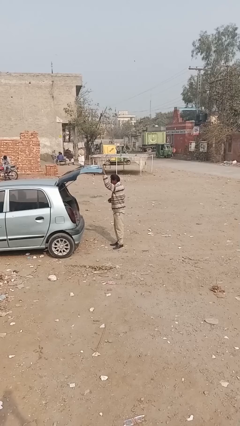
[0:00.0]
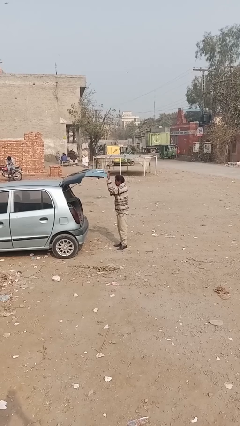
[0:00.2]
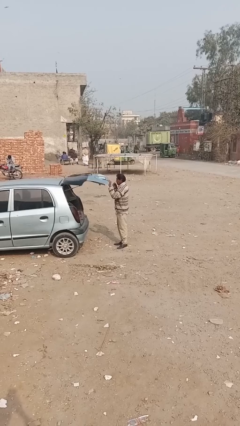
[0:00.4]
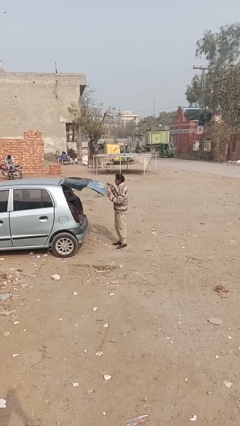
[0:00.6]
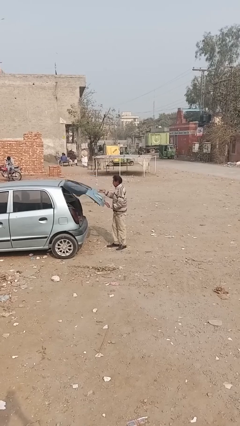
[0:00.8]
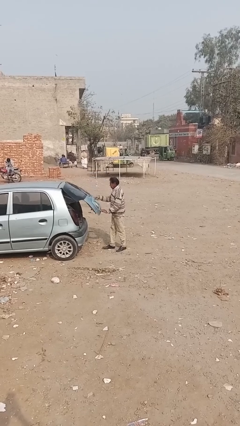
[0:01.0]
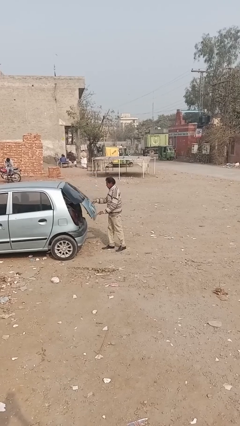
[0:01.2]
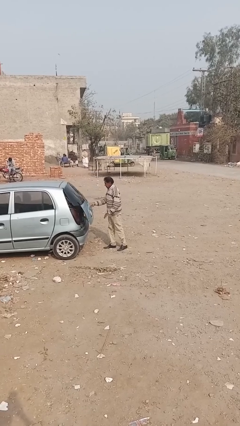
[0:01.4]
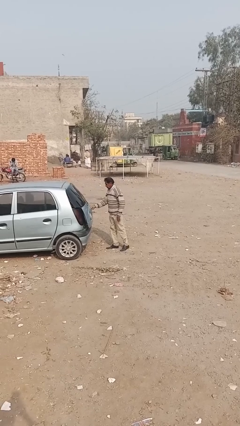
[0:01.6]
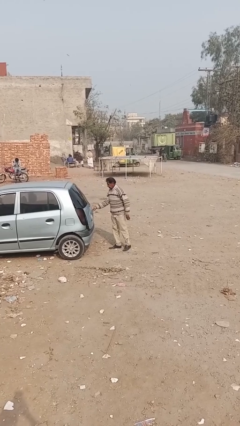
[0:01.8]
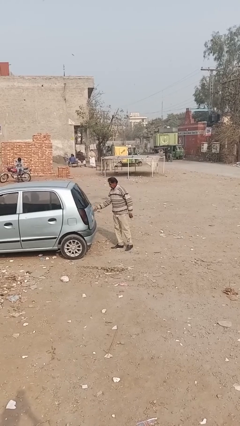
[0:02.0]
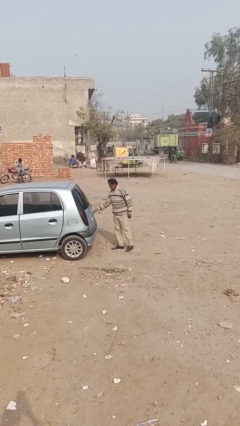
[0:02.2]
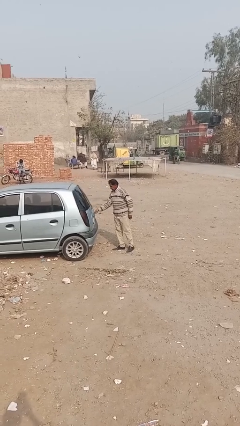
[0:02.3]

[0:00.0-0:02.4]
person closes car trunk

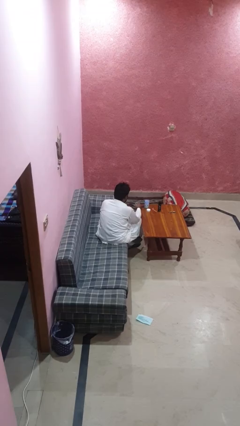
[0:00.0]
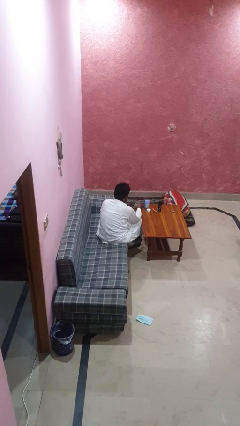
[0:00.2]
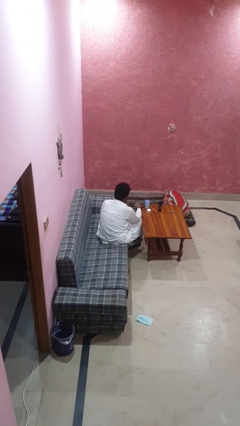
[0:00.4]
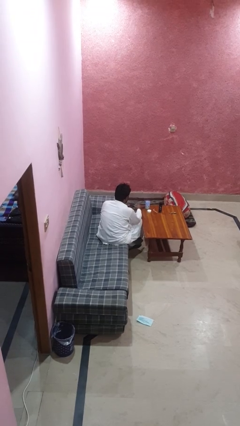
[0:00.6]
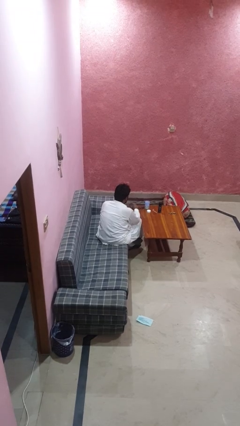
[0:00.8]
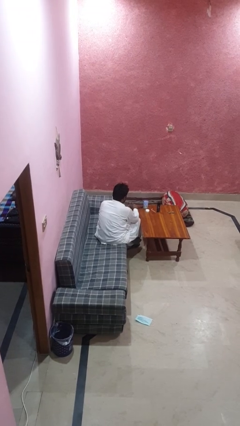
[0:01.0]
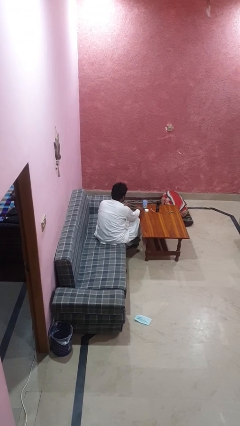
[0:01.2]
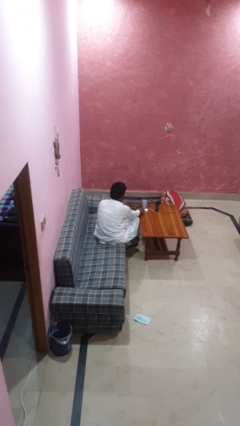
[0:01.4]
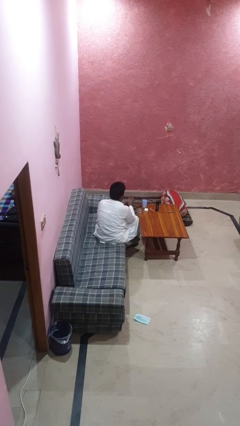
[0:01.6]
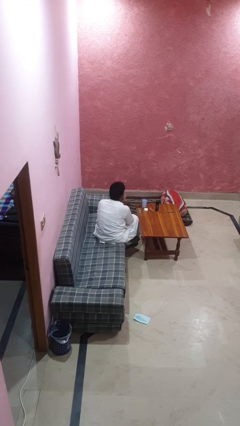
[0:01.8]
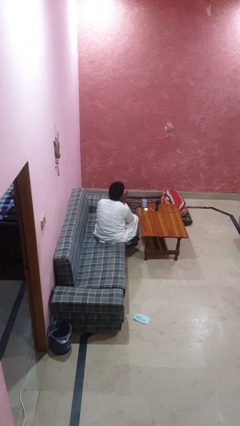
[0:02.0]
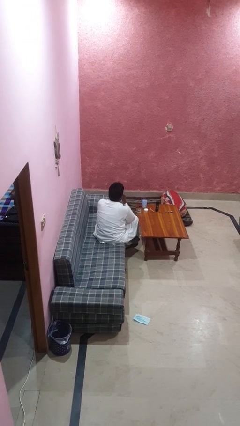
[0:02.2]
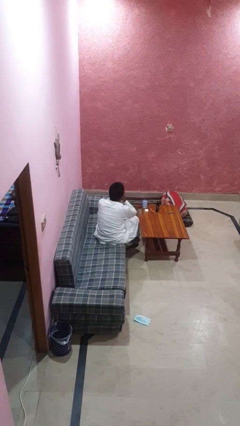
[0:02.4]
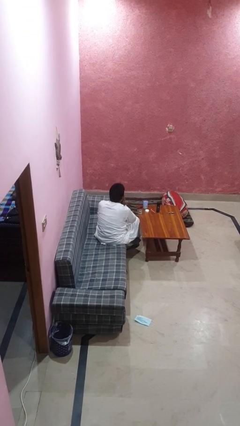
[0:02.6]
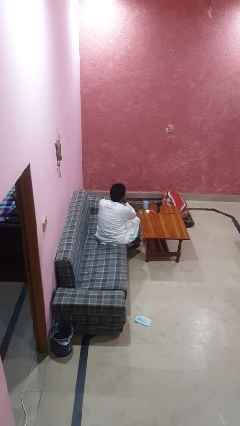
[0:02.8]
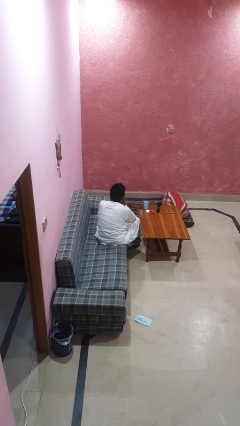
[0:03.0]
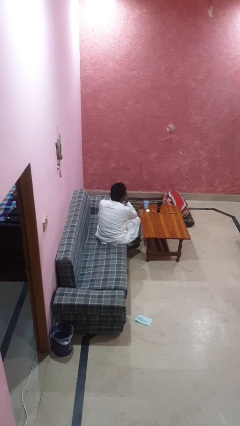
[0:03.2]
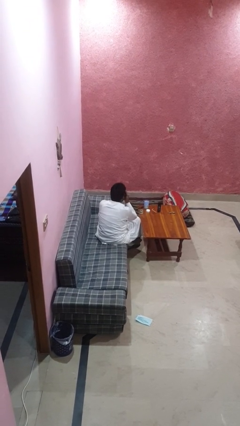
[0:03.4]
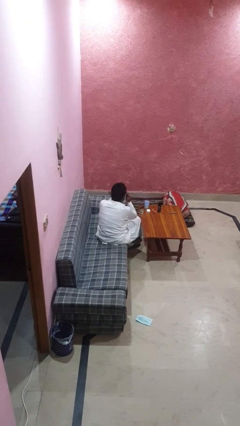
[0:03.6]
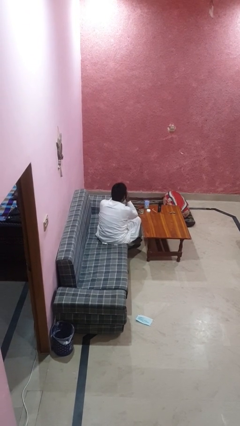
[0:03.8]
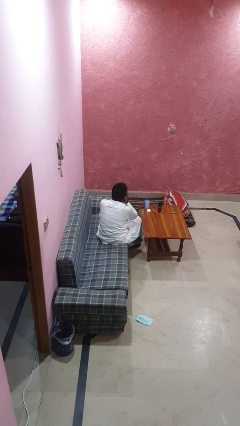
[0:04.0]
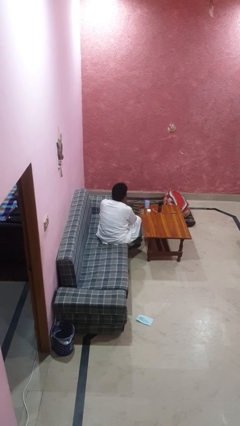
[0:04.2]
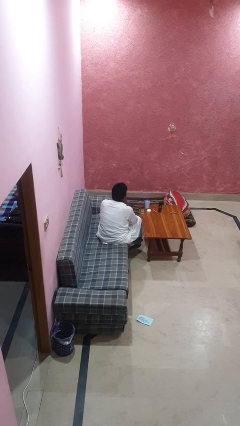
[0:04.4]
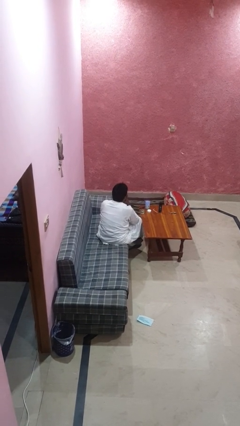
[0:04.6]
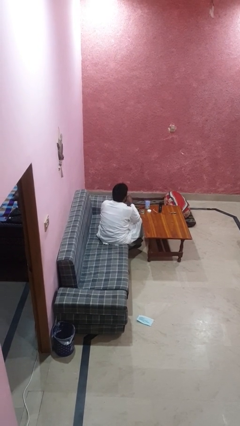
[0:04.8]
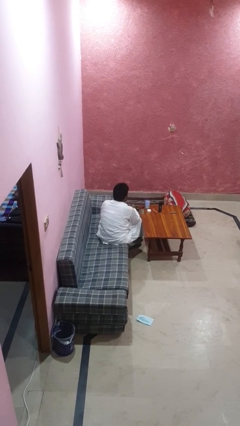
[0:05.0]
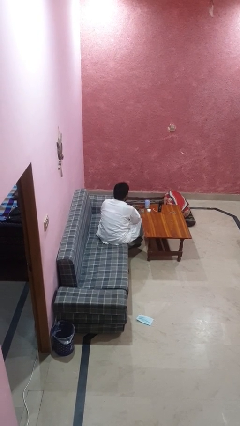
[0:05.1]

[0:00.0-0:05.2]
person applies facial moisturizer

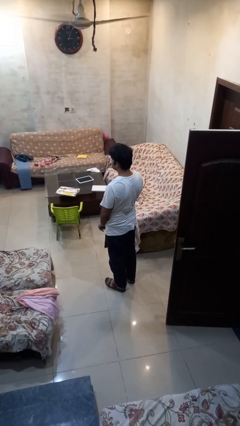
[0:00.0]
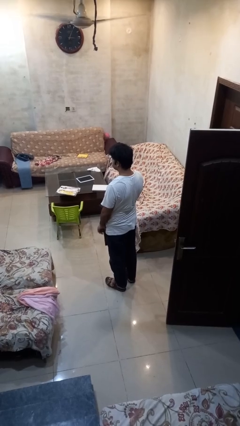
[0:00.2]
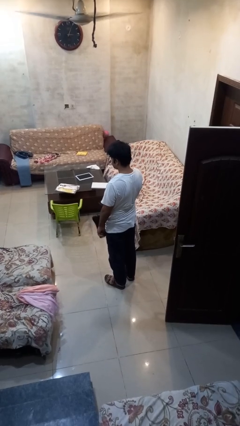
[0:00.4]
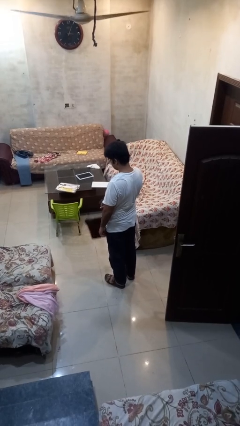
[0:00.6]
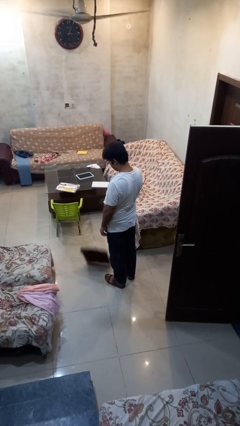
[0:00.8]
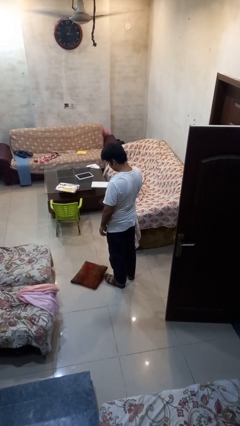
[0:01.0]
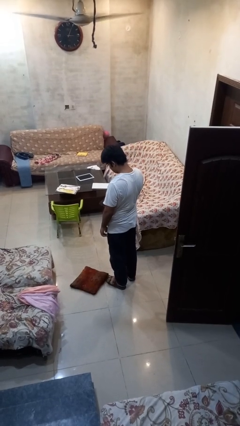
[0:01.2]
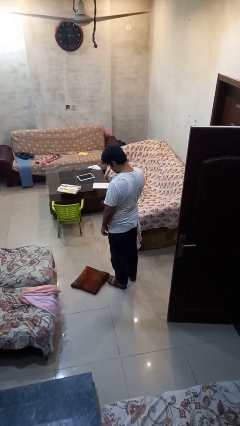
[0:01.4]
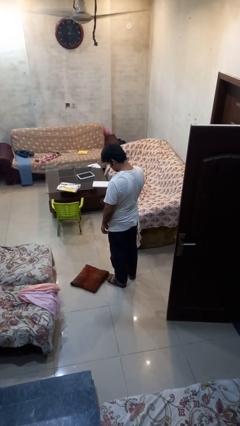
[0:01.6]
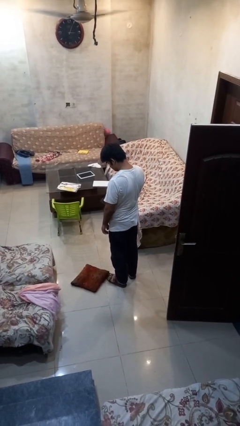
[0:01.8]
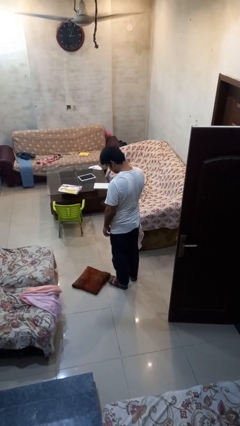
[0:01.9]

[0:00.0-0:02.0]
person drops object

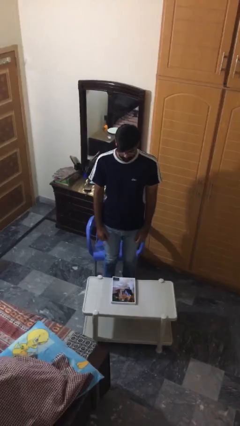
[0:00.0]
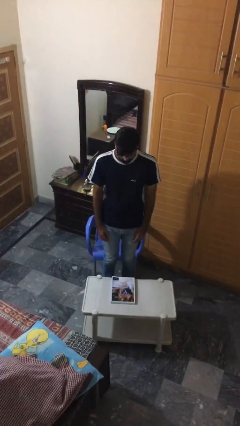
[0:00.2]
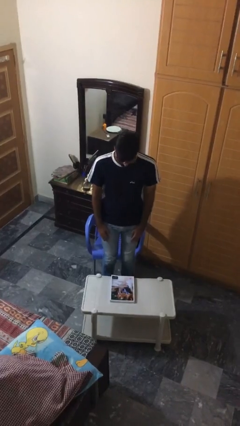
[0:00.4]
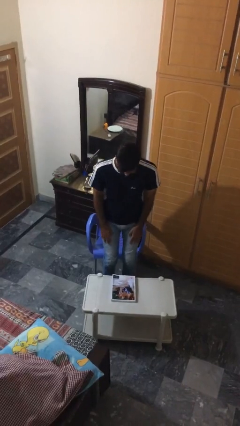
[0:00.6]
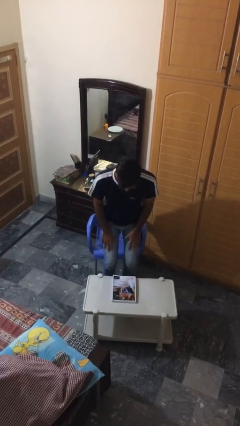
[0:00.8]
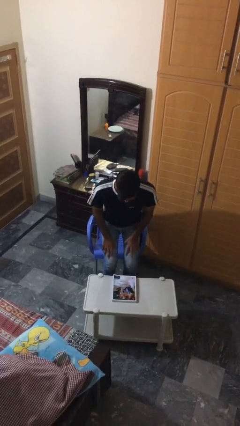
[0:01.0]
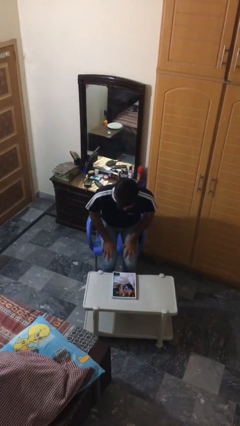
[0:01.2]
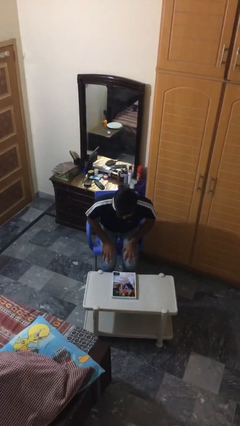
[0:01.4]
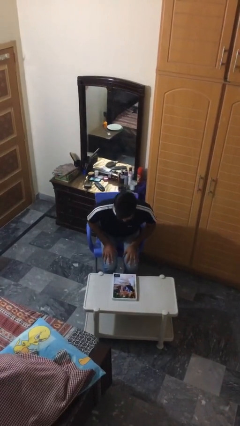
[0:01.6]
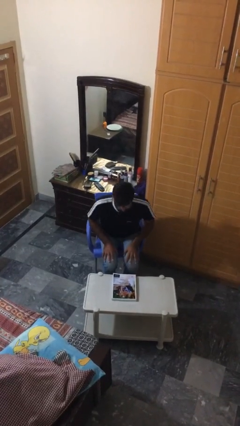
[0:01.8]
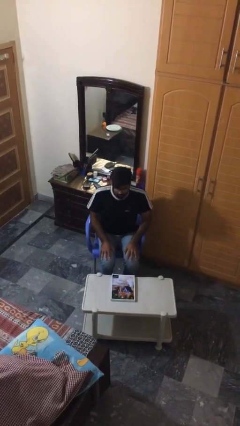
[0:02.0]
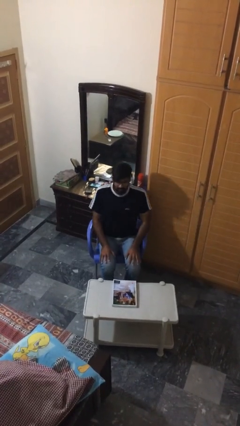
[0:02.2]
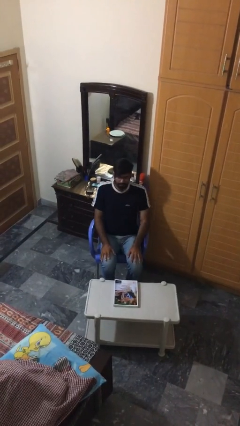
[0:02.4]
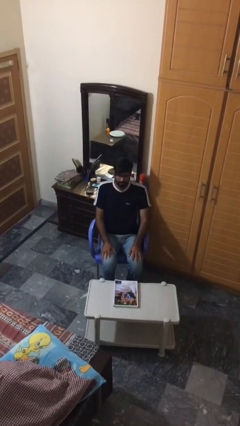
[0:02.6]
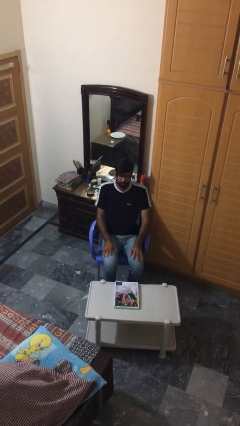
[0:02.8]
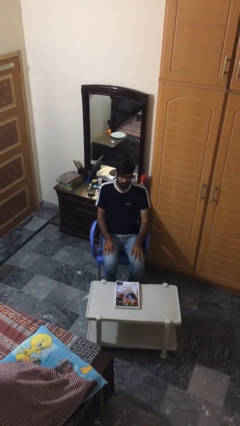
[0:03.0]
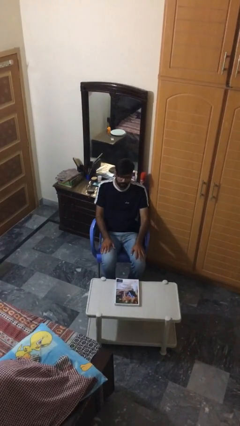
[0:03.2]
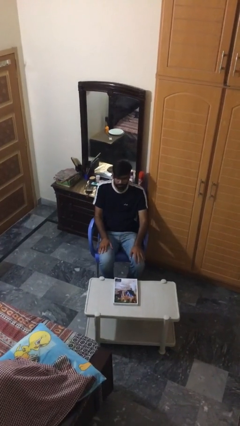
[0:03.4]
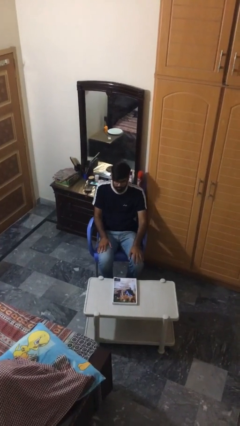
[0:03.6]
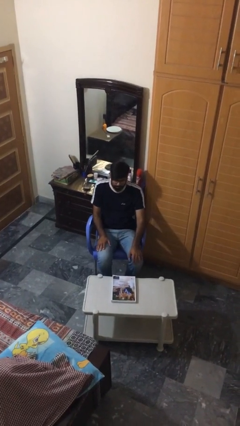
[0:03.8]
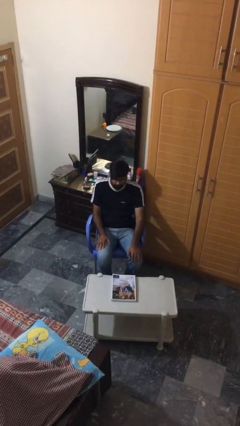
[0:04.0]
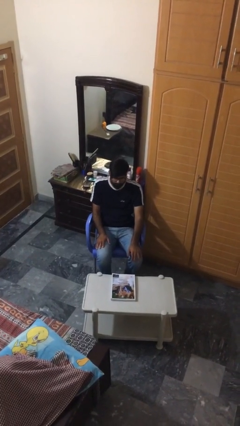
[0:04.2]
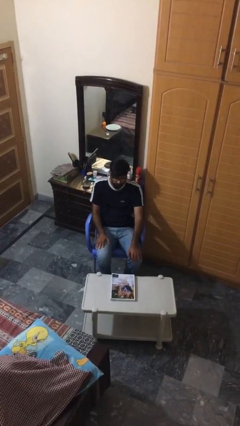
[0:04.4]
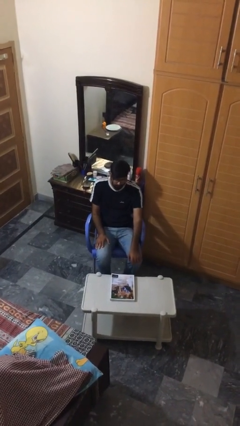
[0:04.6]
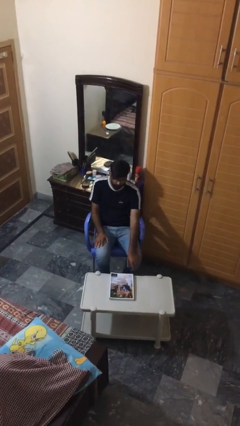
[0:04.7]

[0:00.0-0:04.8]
person sits down

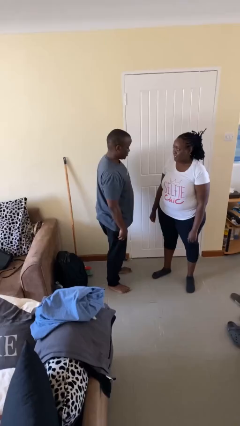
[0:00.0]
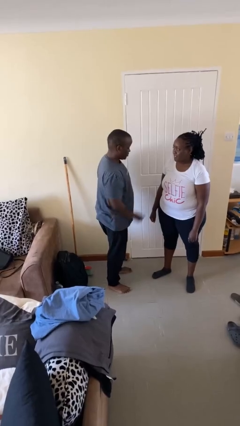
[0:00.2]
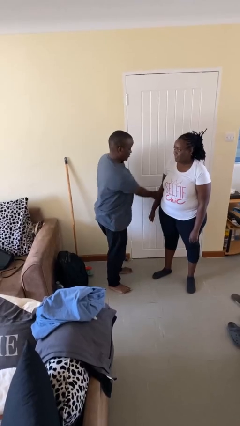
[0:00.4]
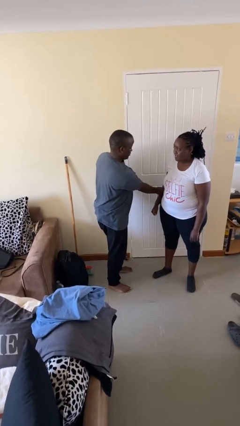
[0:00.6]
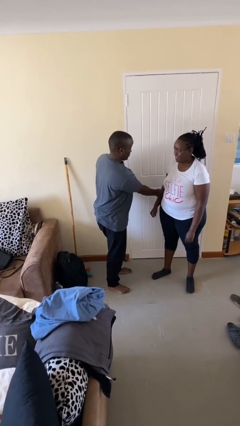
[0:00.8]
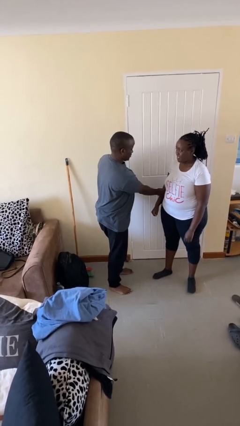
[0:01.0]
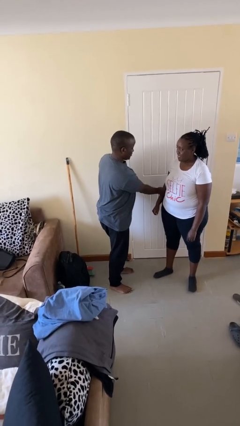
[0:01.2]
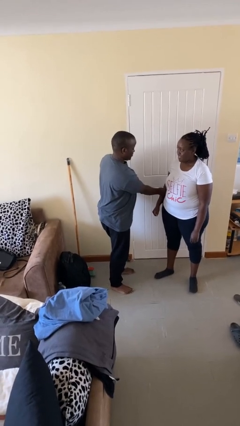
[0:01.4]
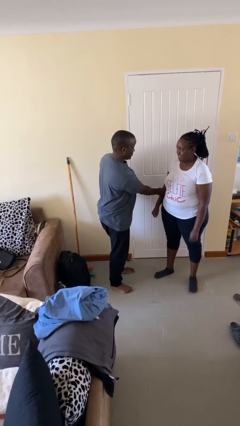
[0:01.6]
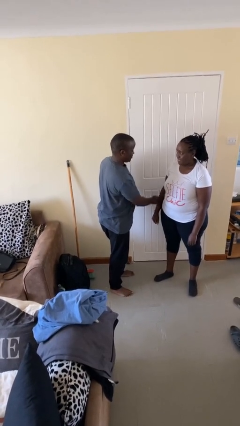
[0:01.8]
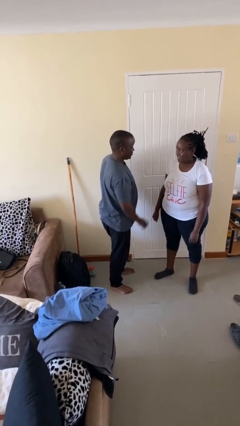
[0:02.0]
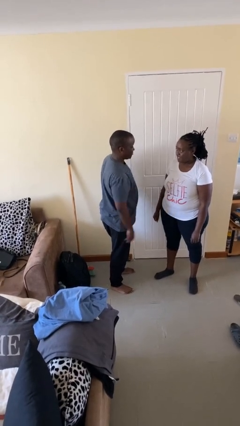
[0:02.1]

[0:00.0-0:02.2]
person grabs person by forearm

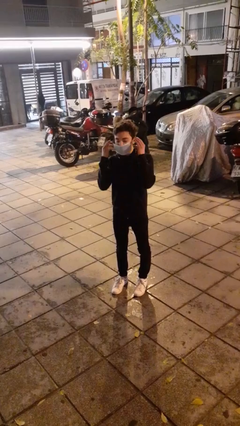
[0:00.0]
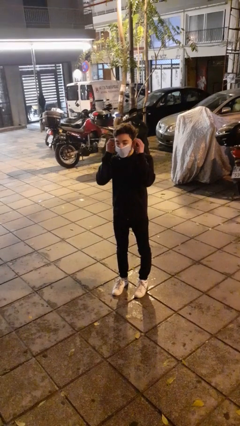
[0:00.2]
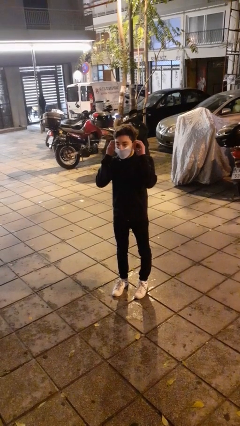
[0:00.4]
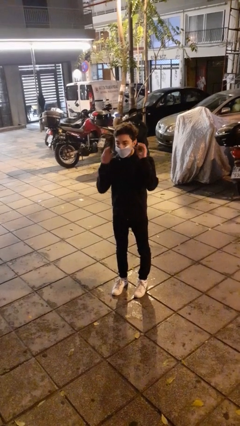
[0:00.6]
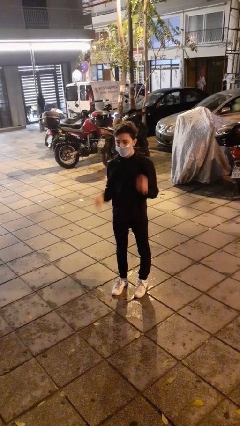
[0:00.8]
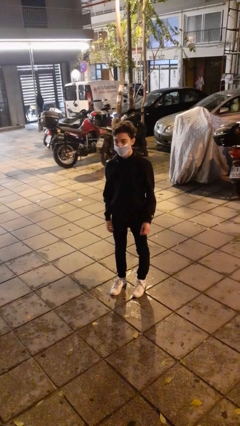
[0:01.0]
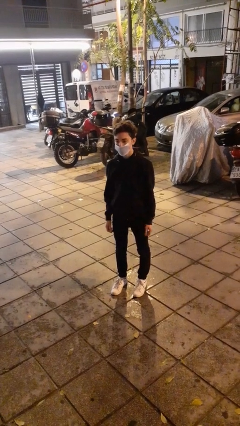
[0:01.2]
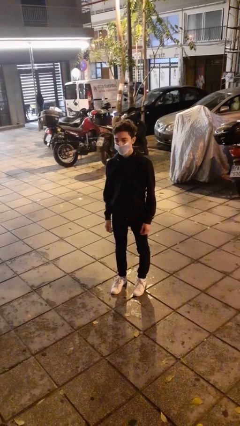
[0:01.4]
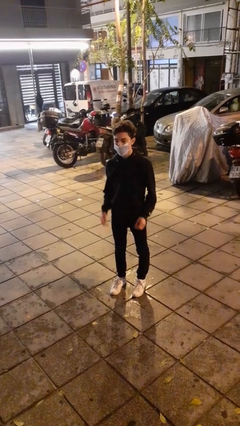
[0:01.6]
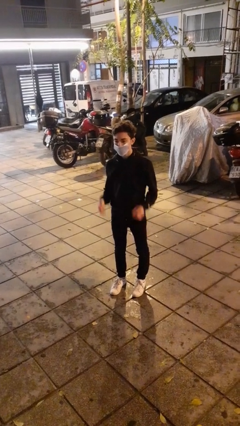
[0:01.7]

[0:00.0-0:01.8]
person puts on facemask
